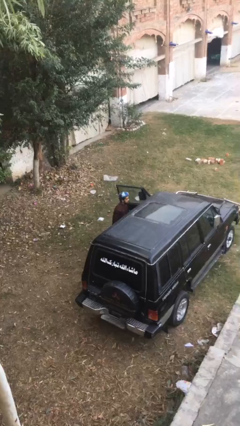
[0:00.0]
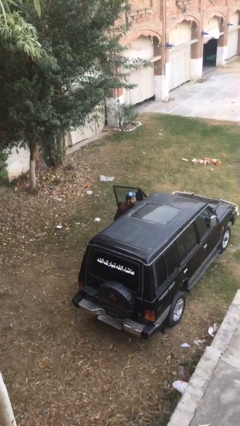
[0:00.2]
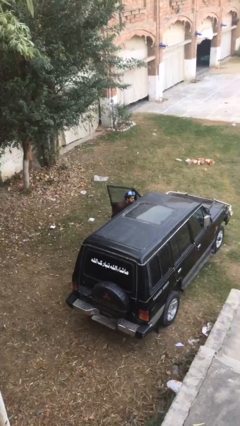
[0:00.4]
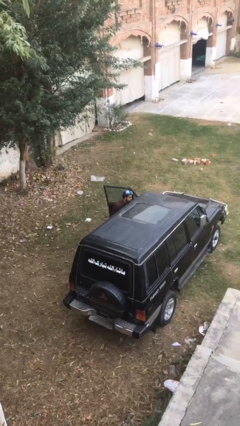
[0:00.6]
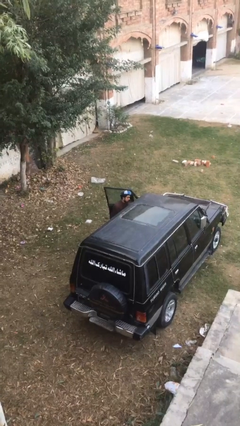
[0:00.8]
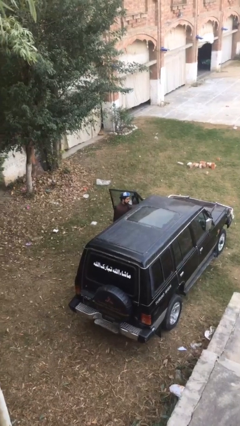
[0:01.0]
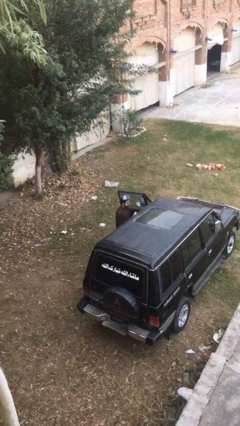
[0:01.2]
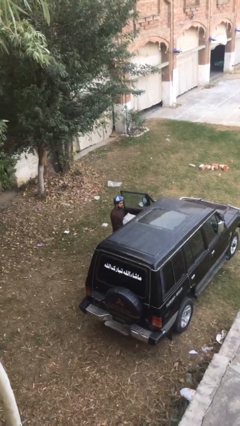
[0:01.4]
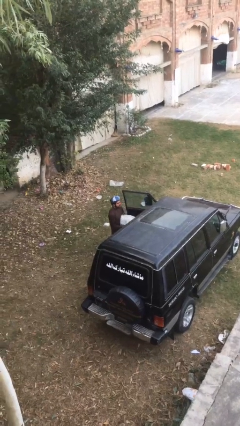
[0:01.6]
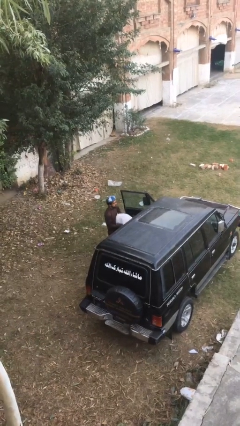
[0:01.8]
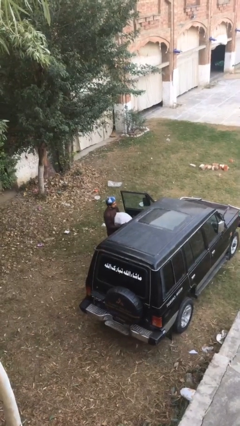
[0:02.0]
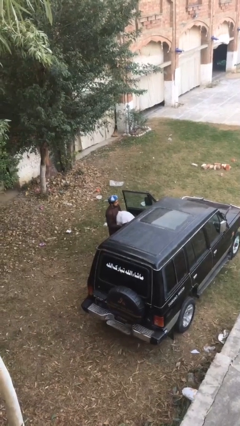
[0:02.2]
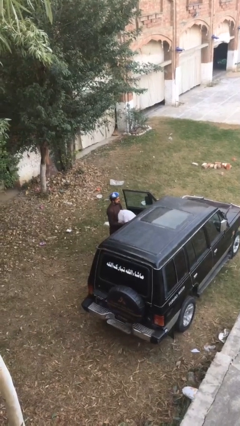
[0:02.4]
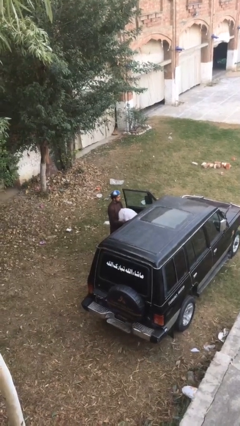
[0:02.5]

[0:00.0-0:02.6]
person unloads car

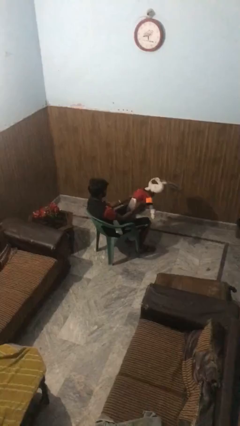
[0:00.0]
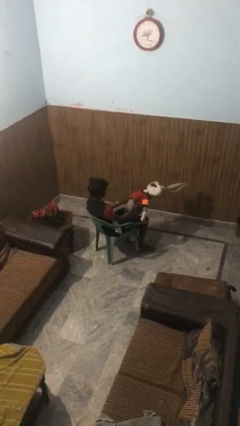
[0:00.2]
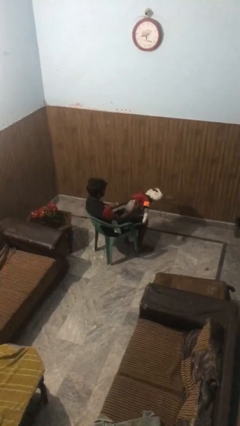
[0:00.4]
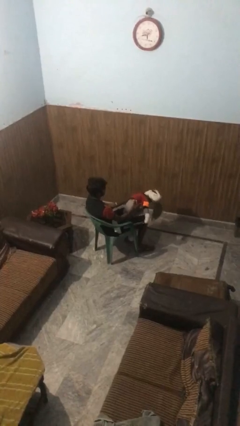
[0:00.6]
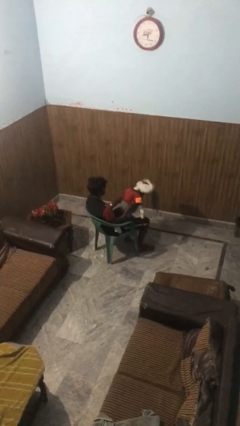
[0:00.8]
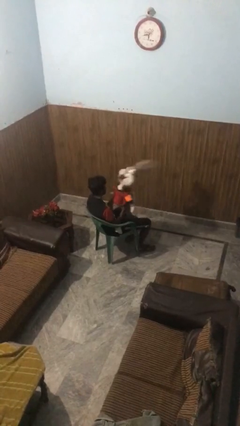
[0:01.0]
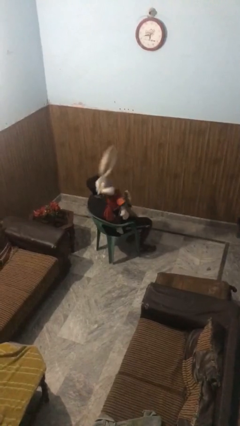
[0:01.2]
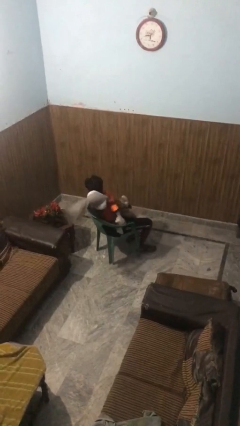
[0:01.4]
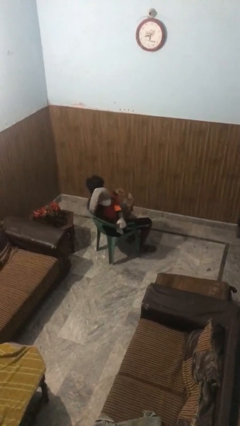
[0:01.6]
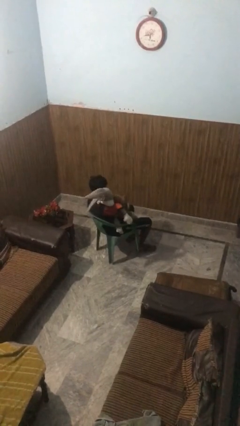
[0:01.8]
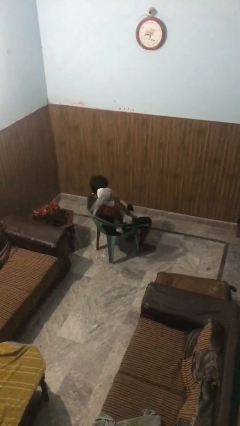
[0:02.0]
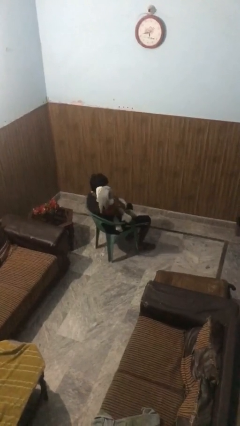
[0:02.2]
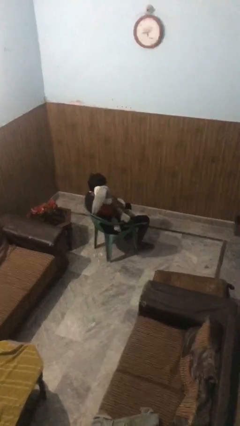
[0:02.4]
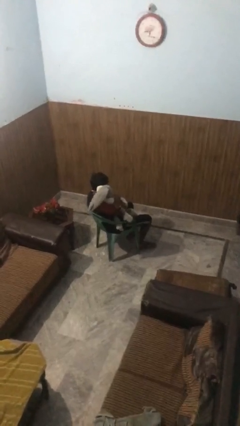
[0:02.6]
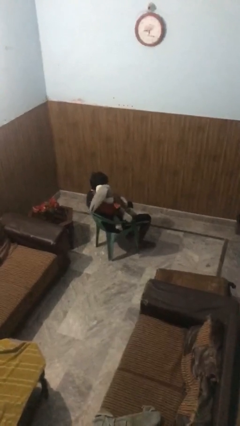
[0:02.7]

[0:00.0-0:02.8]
person hugs stuffed animal

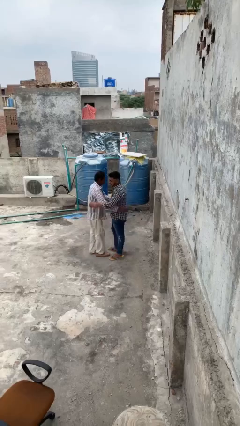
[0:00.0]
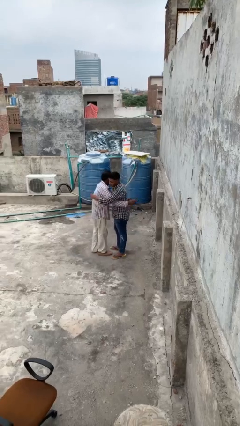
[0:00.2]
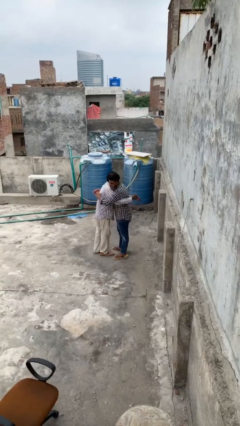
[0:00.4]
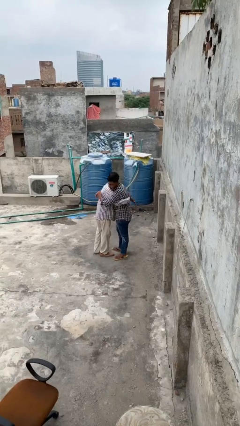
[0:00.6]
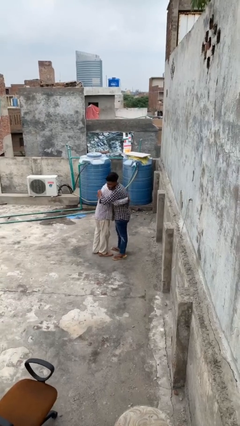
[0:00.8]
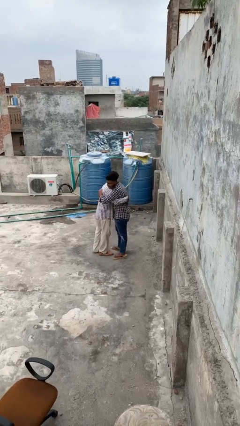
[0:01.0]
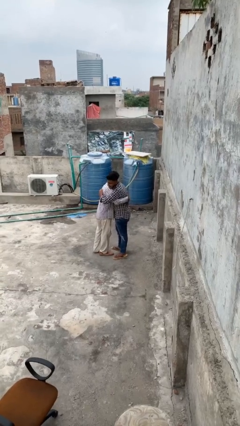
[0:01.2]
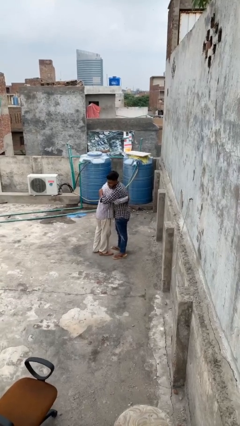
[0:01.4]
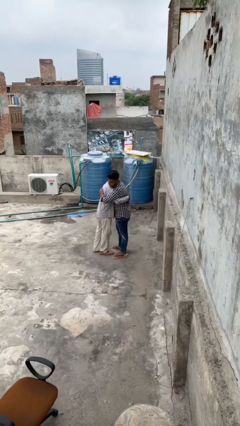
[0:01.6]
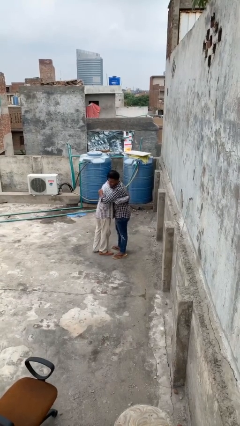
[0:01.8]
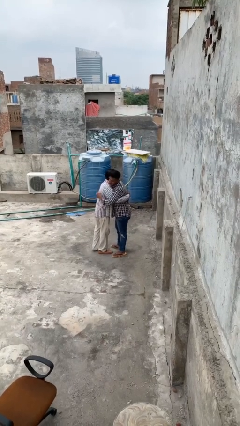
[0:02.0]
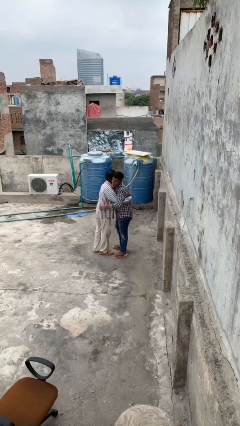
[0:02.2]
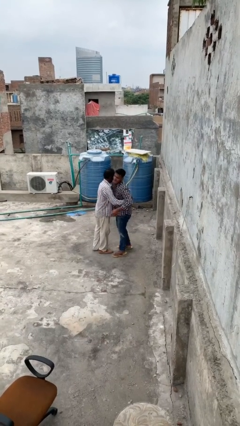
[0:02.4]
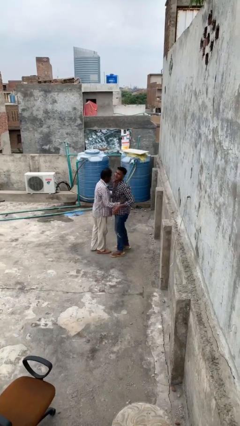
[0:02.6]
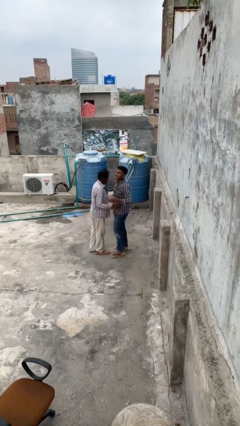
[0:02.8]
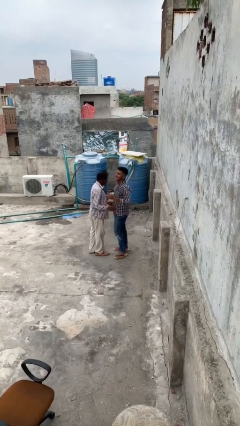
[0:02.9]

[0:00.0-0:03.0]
person embraces person

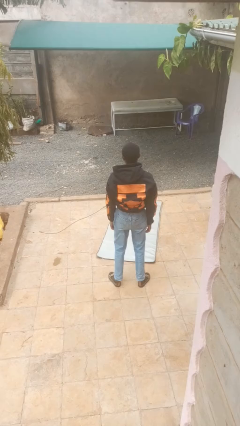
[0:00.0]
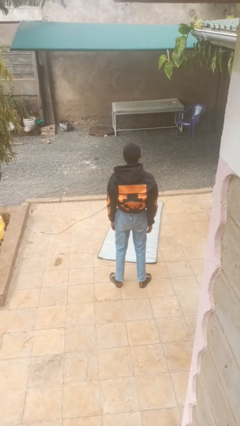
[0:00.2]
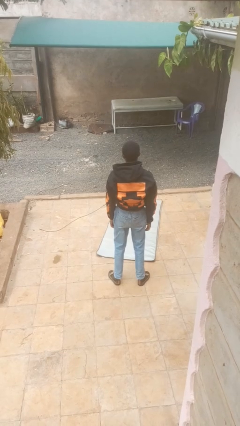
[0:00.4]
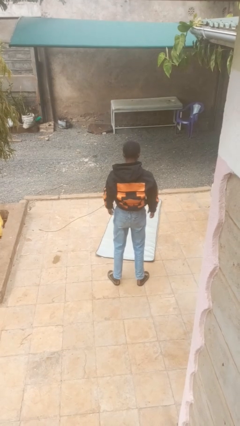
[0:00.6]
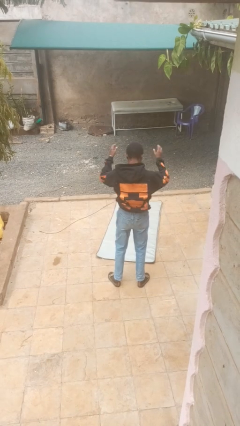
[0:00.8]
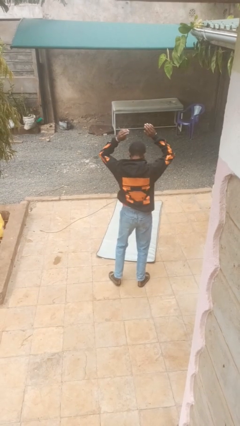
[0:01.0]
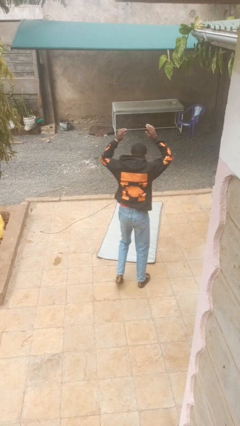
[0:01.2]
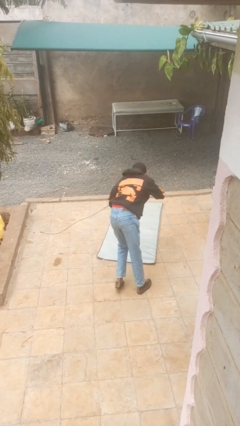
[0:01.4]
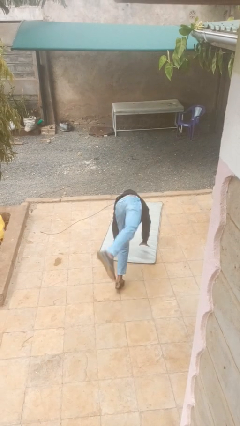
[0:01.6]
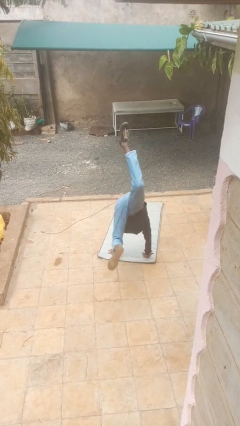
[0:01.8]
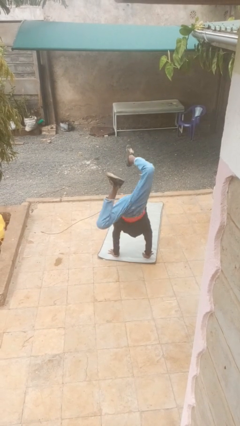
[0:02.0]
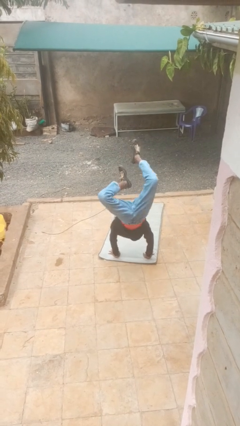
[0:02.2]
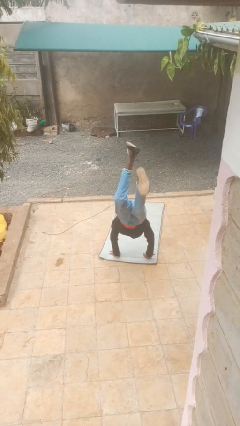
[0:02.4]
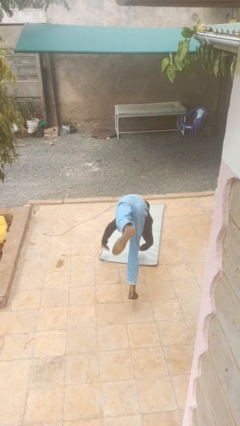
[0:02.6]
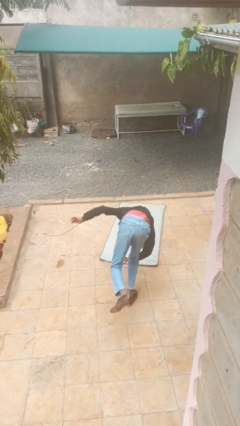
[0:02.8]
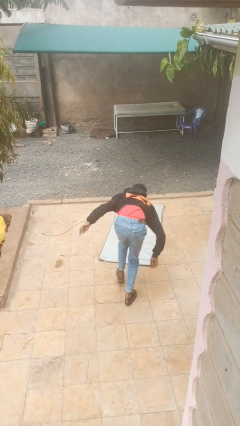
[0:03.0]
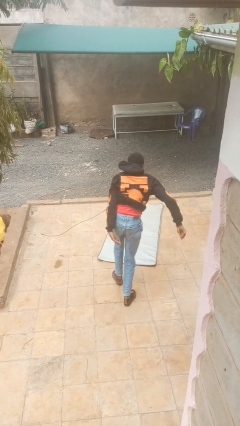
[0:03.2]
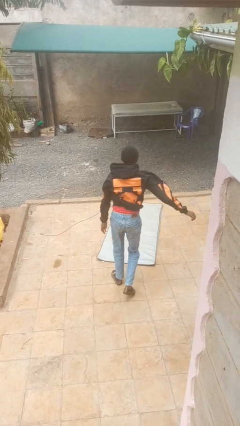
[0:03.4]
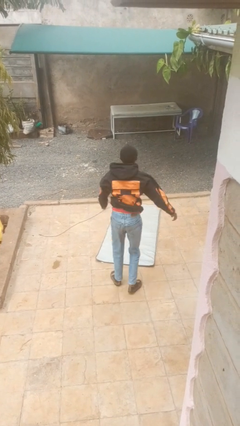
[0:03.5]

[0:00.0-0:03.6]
person handstand

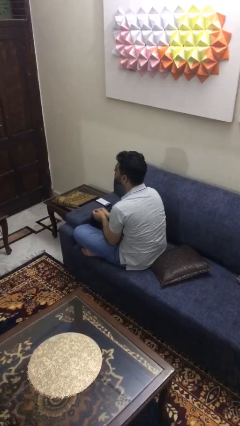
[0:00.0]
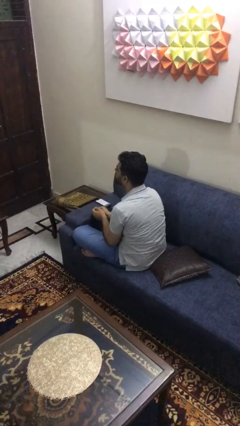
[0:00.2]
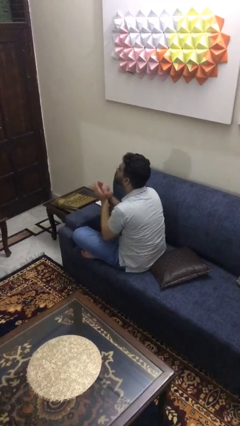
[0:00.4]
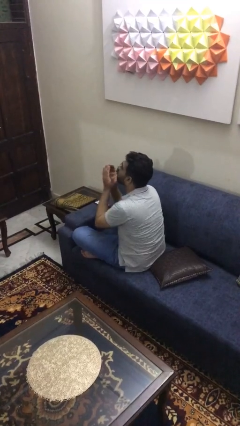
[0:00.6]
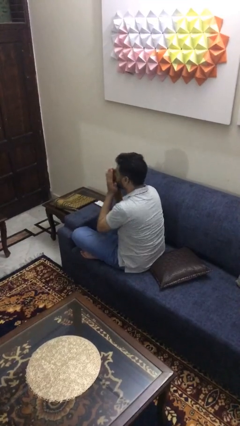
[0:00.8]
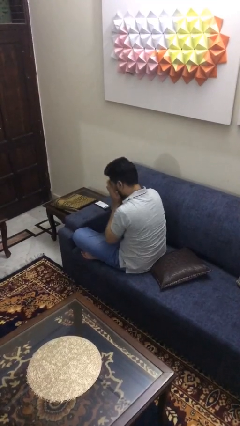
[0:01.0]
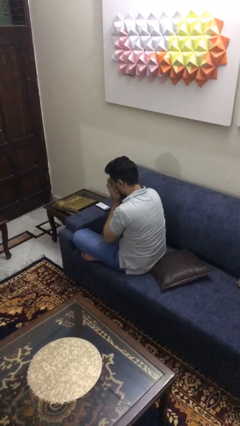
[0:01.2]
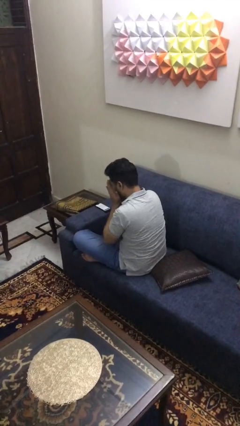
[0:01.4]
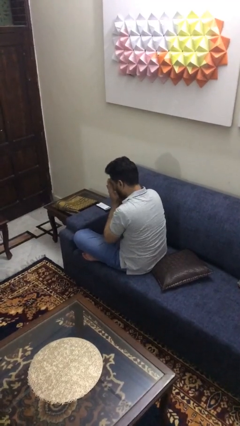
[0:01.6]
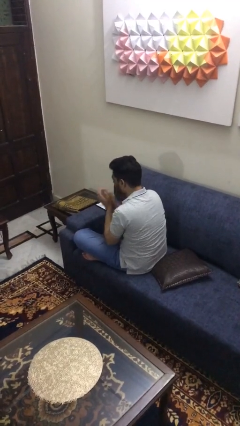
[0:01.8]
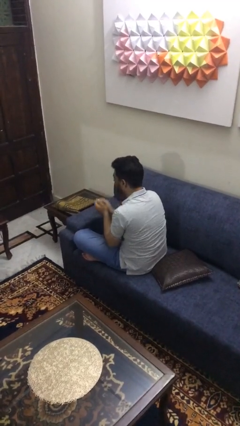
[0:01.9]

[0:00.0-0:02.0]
person sneezes into arm

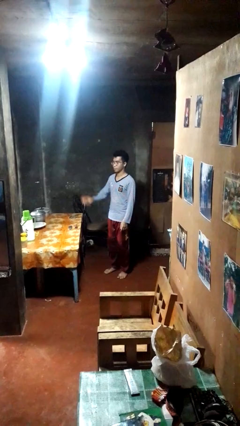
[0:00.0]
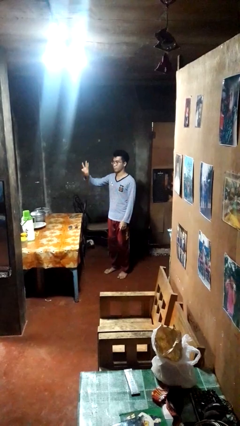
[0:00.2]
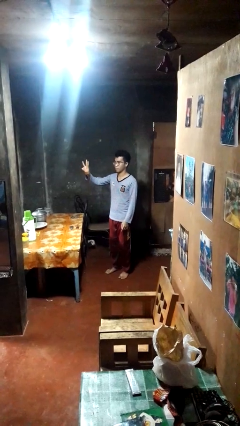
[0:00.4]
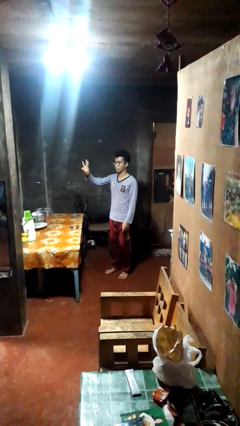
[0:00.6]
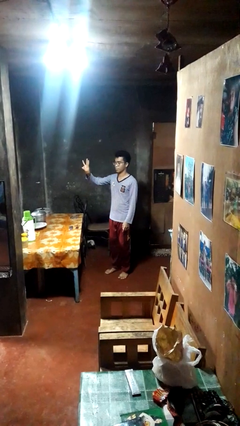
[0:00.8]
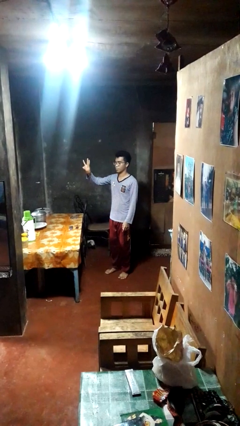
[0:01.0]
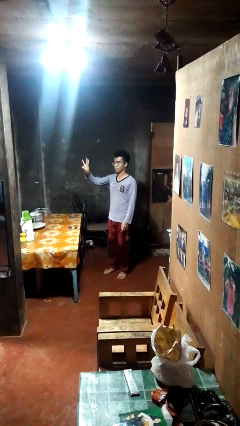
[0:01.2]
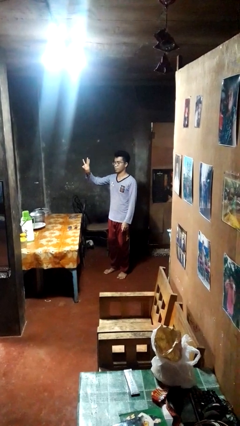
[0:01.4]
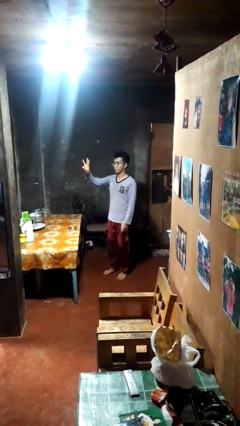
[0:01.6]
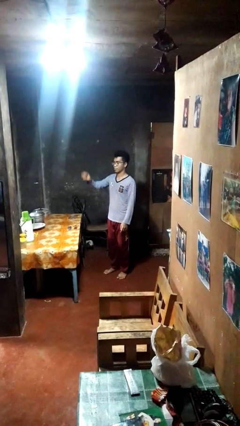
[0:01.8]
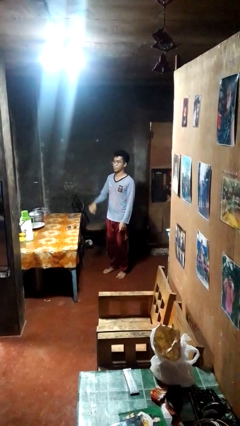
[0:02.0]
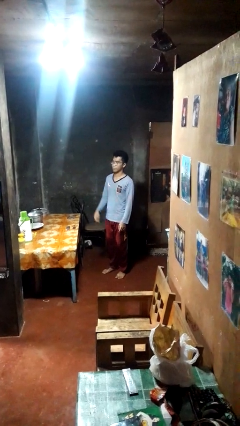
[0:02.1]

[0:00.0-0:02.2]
person gestures number three

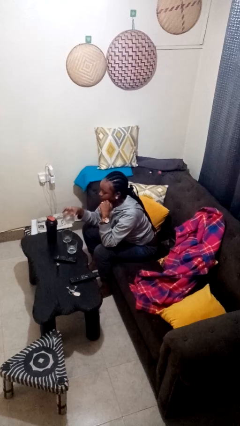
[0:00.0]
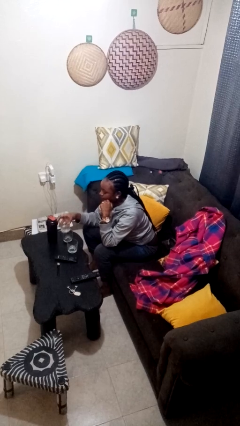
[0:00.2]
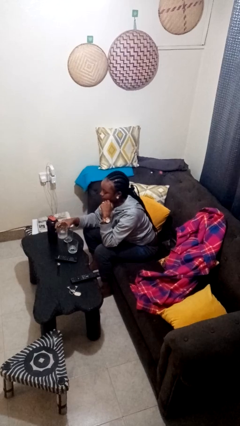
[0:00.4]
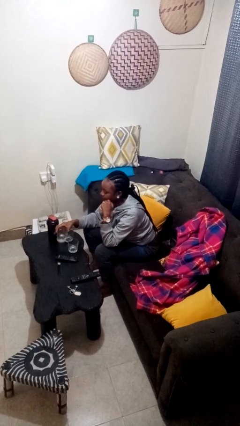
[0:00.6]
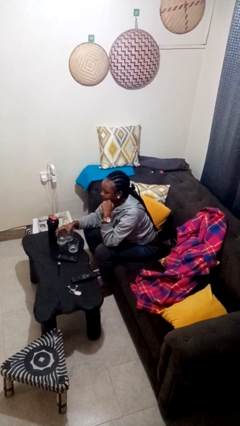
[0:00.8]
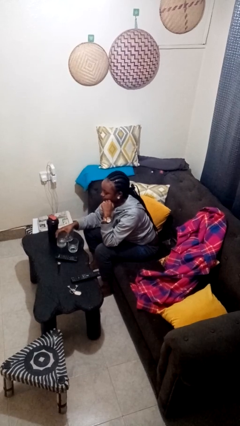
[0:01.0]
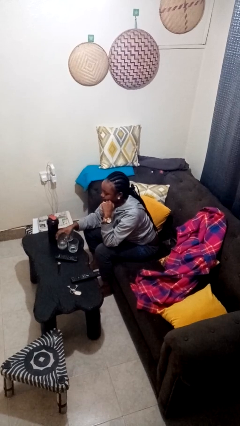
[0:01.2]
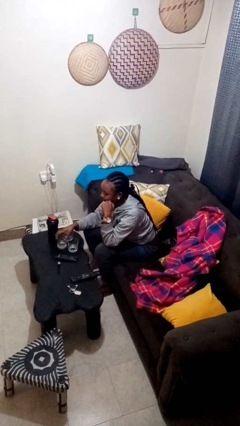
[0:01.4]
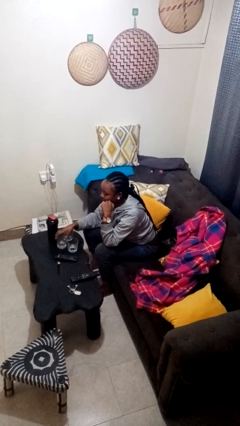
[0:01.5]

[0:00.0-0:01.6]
person puts down object on table
